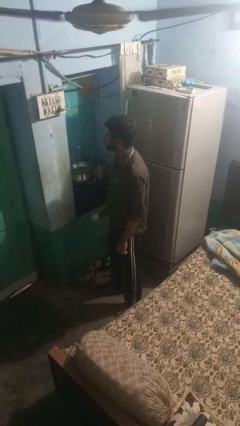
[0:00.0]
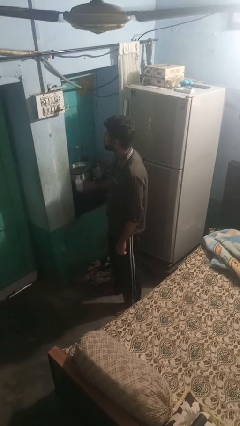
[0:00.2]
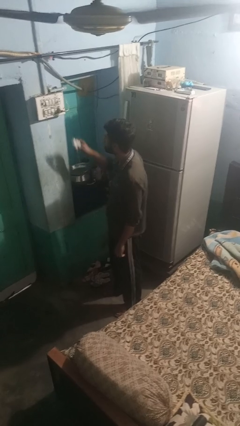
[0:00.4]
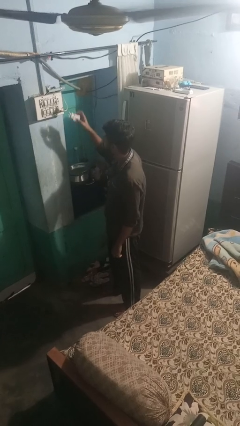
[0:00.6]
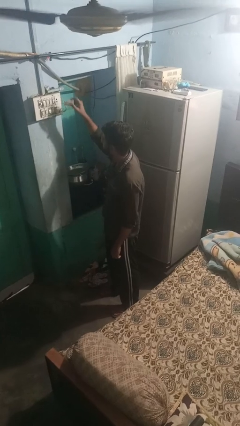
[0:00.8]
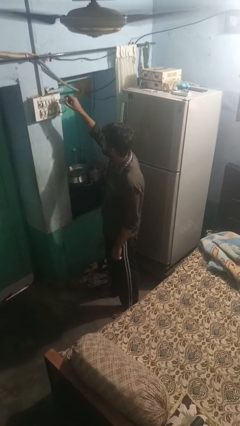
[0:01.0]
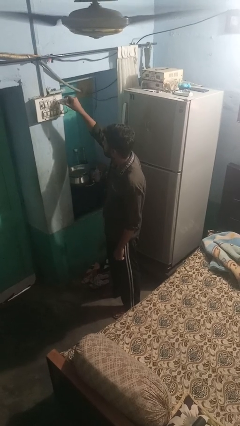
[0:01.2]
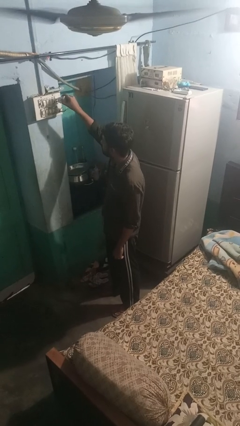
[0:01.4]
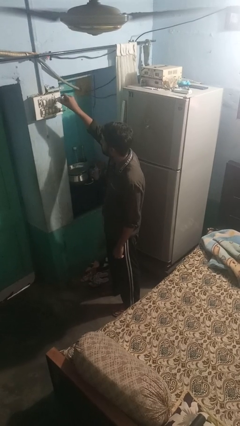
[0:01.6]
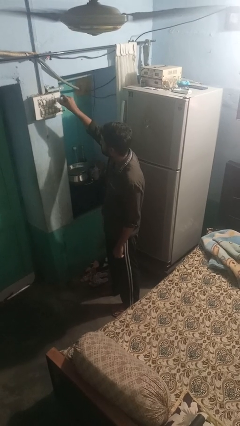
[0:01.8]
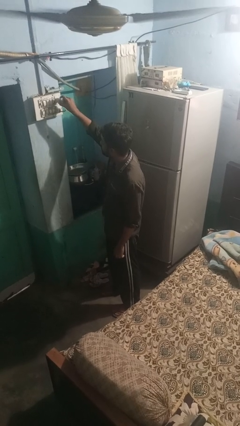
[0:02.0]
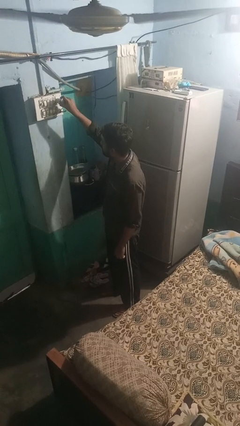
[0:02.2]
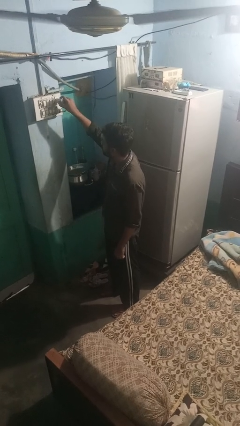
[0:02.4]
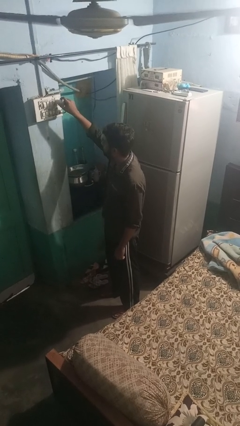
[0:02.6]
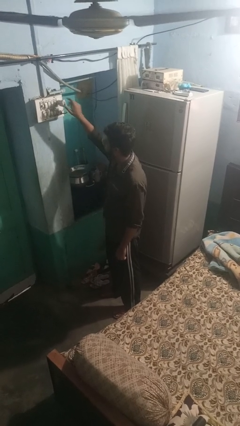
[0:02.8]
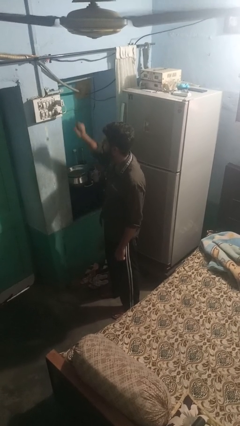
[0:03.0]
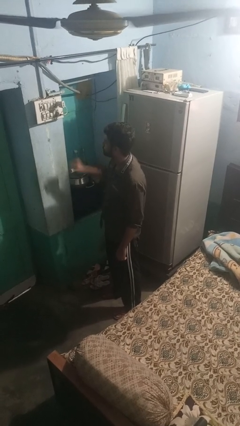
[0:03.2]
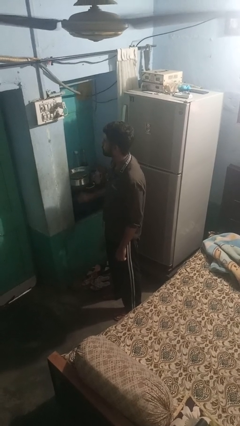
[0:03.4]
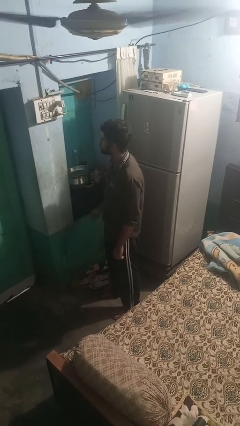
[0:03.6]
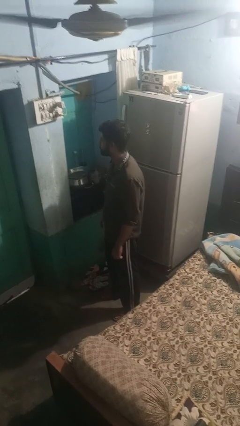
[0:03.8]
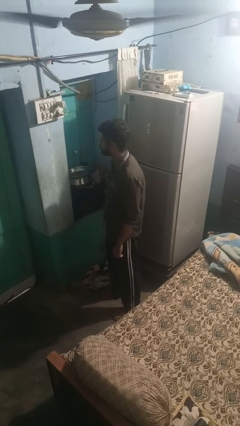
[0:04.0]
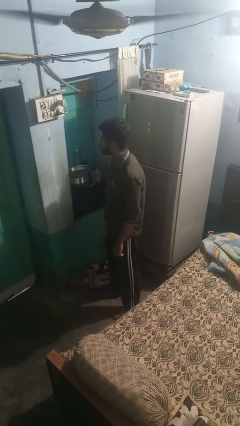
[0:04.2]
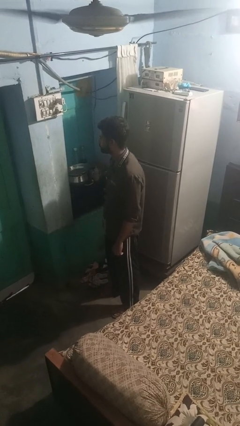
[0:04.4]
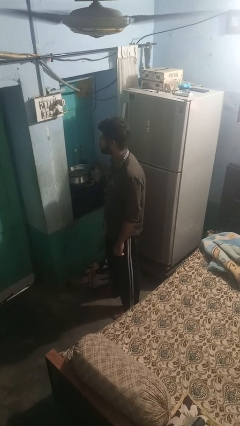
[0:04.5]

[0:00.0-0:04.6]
person plugs into electrical socket

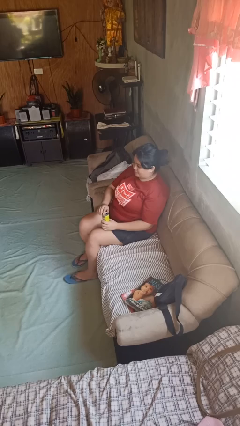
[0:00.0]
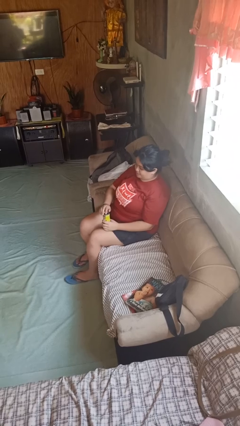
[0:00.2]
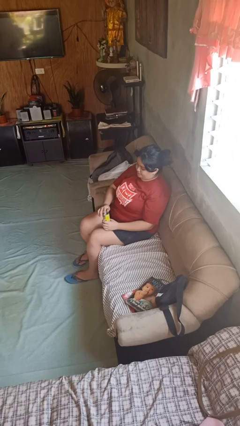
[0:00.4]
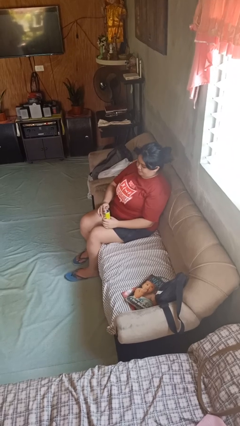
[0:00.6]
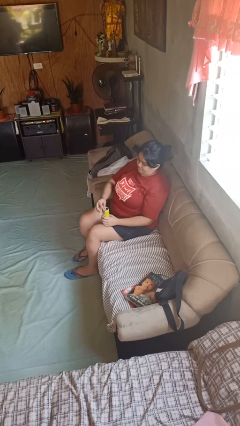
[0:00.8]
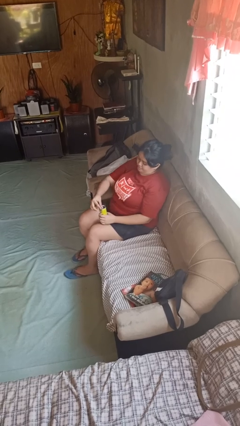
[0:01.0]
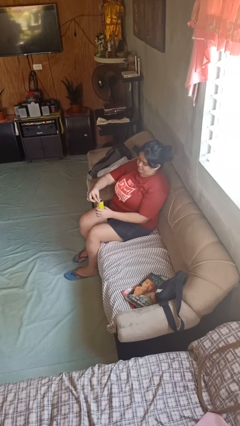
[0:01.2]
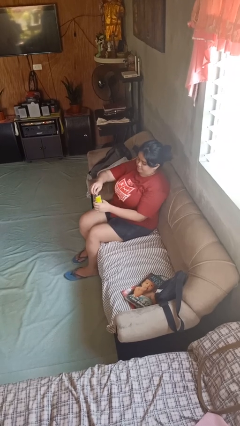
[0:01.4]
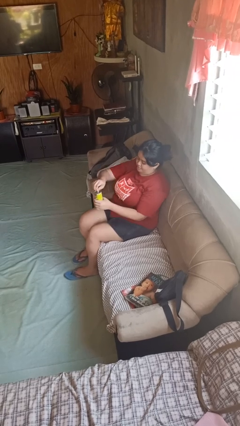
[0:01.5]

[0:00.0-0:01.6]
person opens beverage can

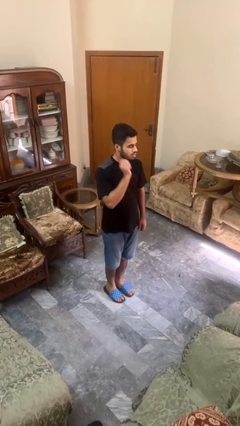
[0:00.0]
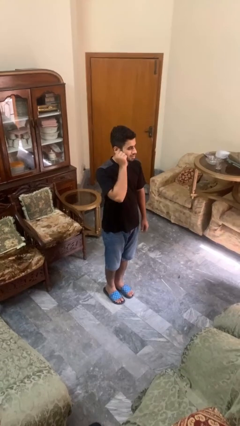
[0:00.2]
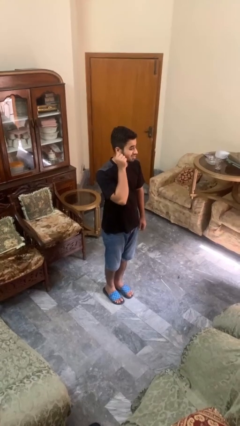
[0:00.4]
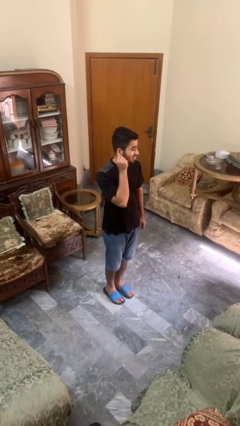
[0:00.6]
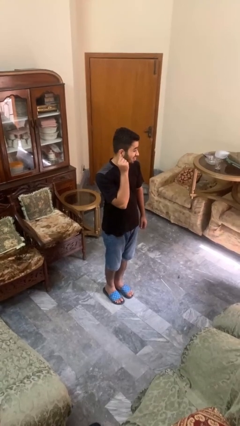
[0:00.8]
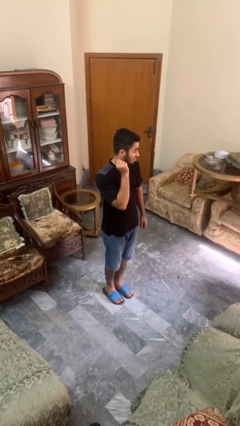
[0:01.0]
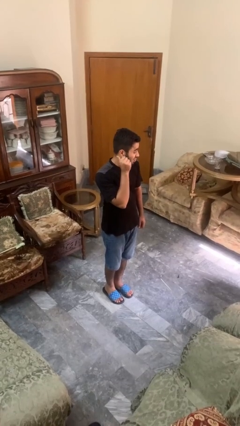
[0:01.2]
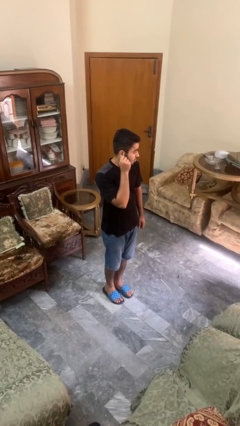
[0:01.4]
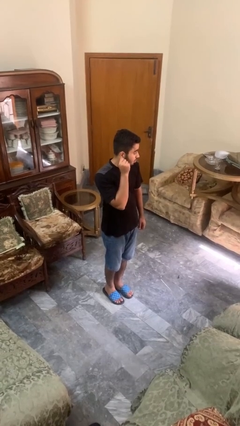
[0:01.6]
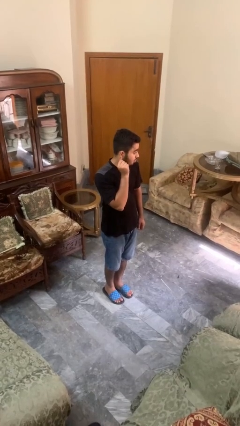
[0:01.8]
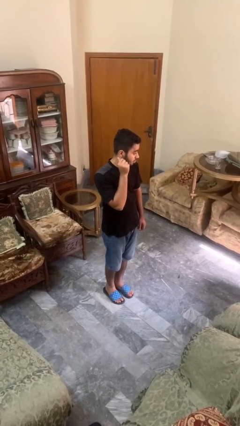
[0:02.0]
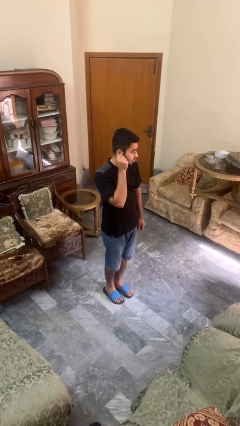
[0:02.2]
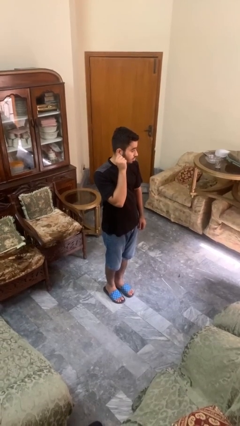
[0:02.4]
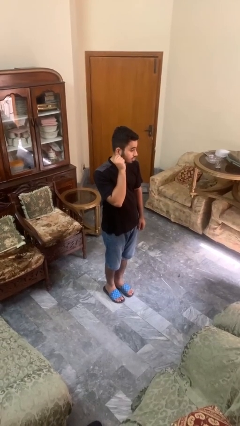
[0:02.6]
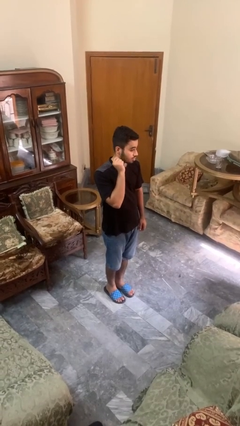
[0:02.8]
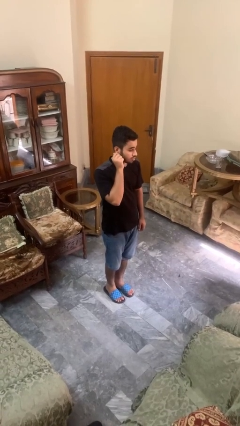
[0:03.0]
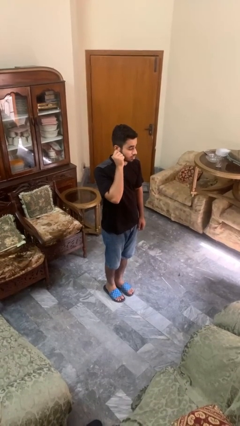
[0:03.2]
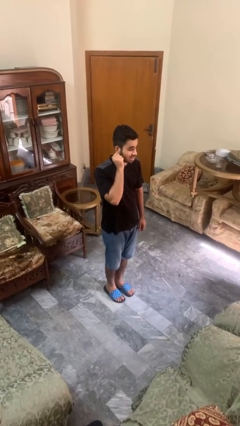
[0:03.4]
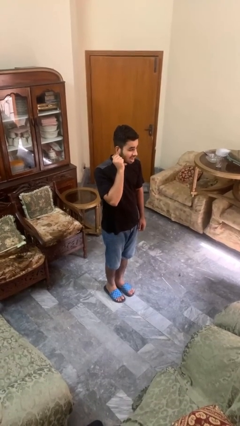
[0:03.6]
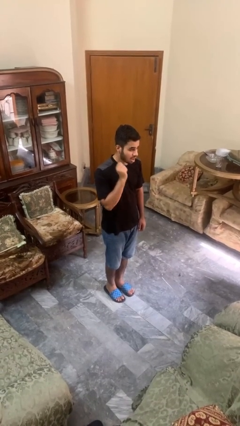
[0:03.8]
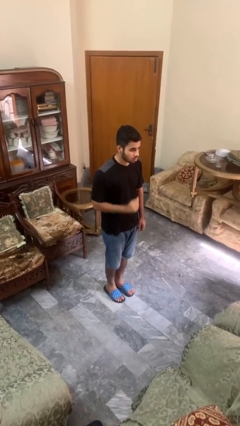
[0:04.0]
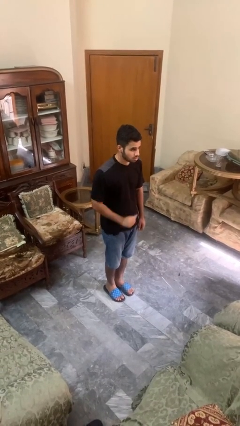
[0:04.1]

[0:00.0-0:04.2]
person touches earlobe

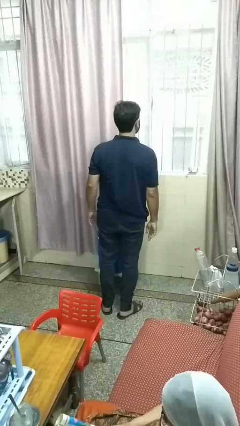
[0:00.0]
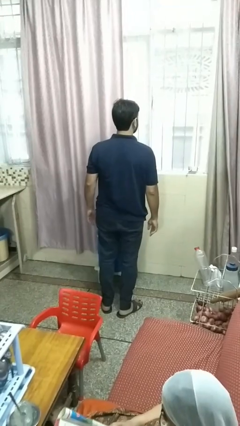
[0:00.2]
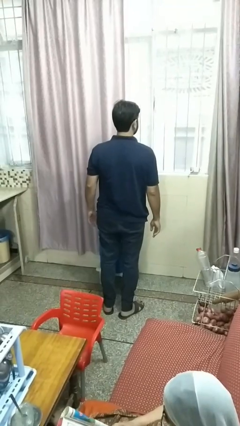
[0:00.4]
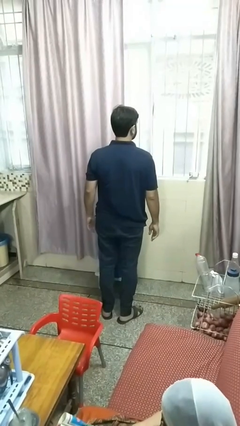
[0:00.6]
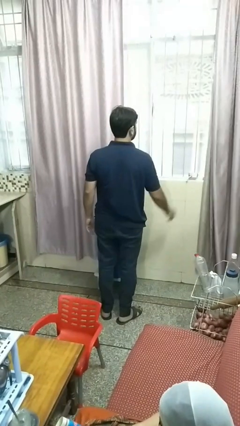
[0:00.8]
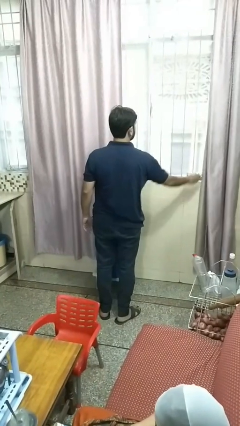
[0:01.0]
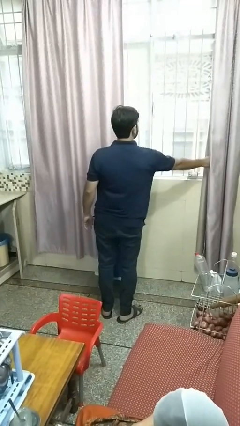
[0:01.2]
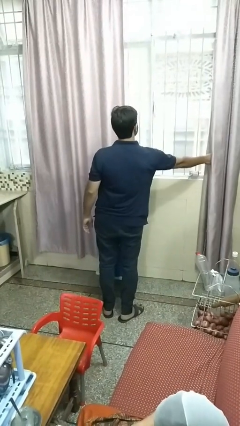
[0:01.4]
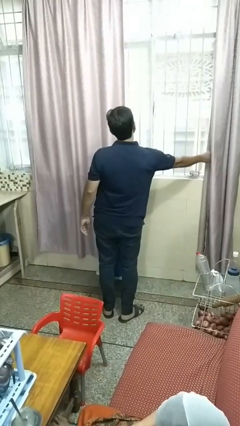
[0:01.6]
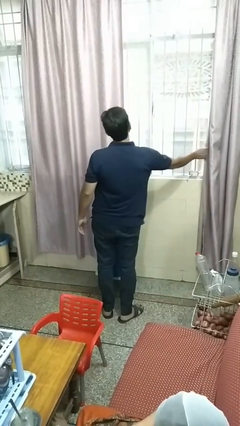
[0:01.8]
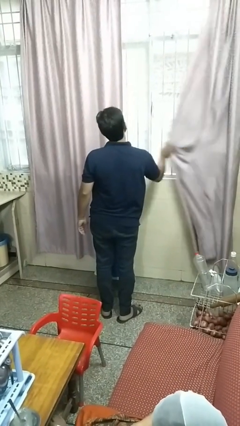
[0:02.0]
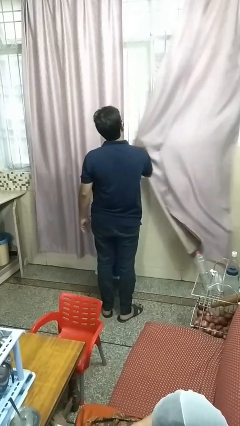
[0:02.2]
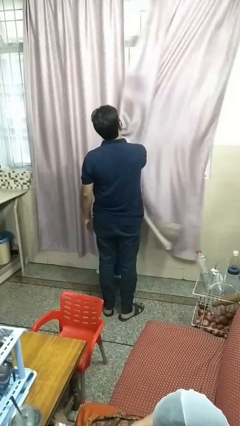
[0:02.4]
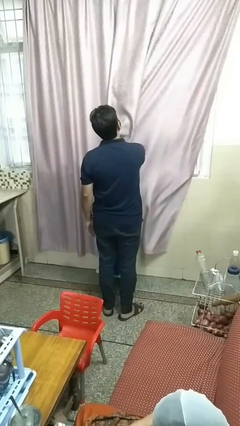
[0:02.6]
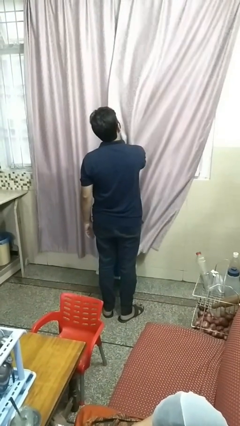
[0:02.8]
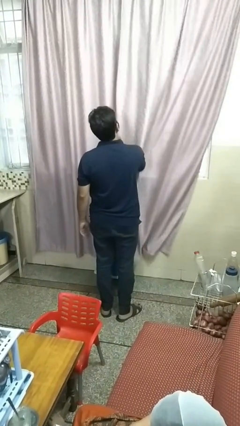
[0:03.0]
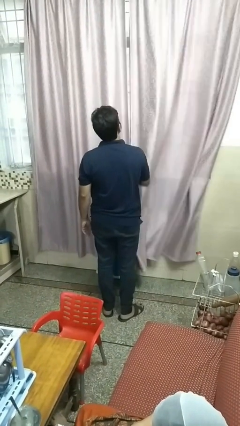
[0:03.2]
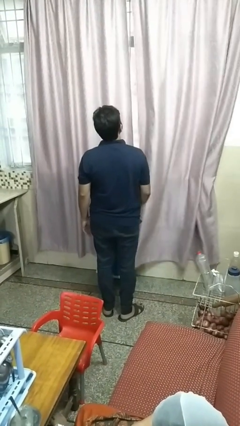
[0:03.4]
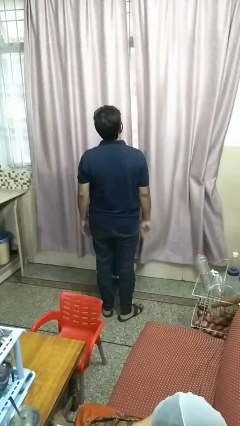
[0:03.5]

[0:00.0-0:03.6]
person closes curtains

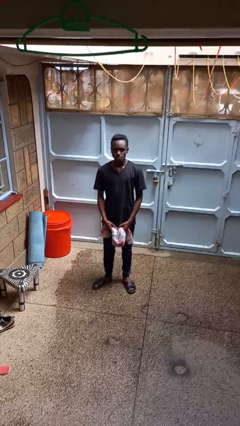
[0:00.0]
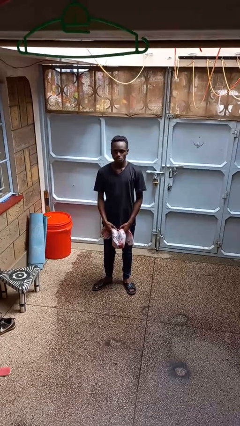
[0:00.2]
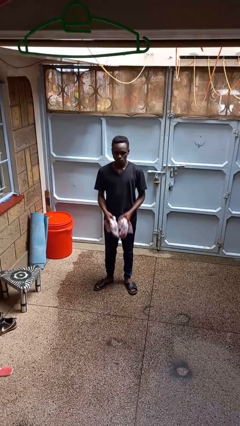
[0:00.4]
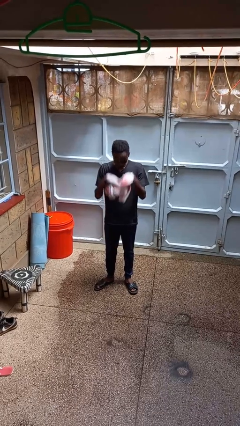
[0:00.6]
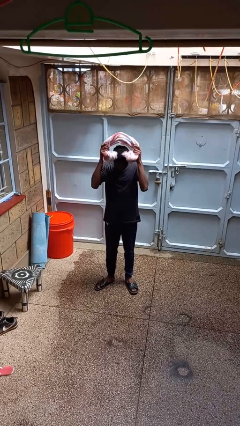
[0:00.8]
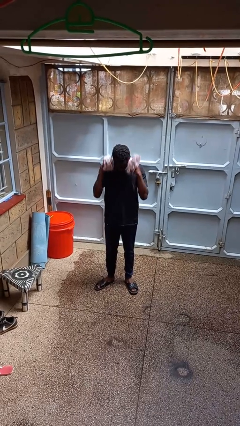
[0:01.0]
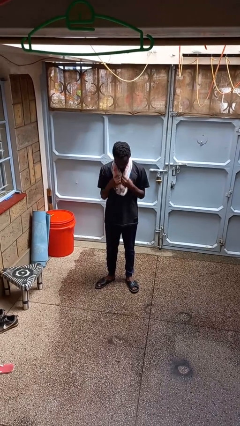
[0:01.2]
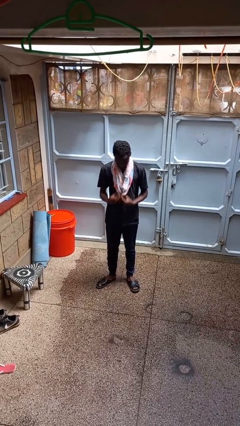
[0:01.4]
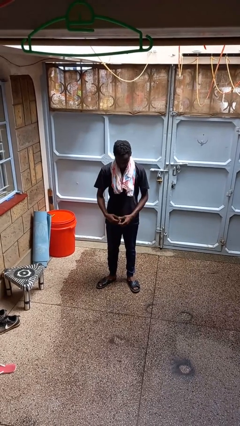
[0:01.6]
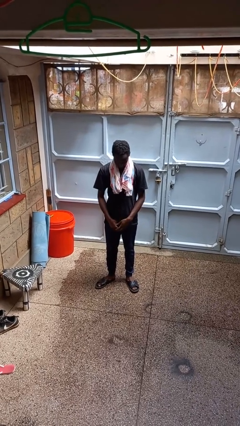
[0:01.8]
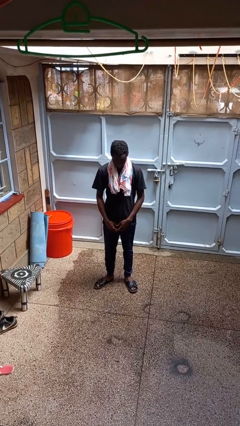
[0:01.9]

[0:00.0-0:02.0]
person puts on scarf

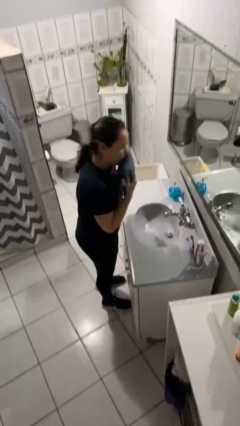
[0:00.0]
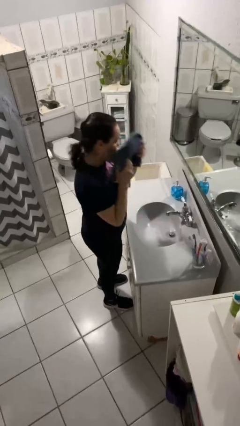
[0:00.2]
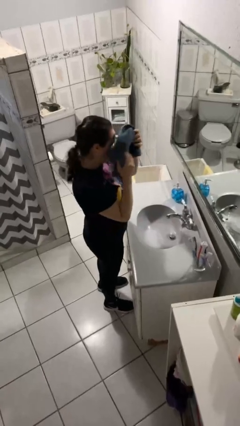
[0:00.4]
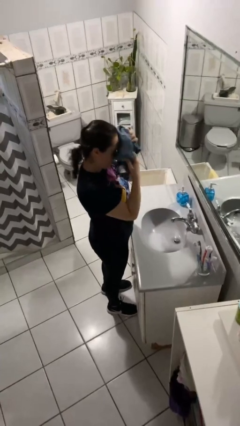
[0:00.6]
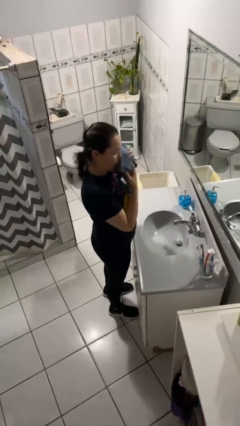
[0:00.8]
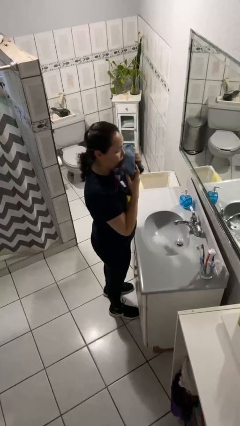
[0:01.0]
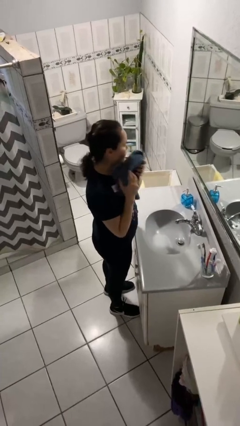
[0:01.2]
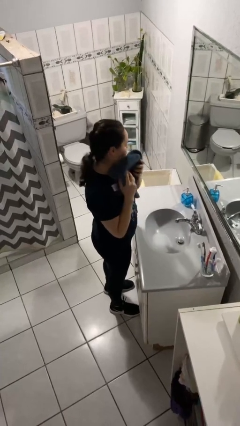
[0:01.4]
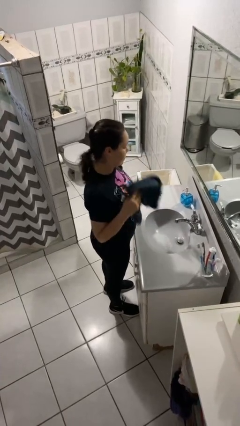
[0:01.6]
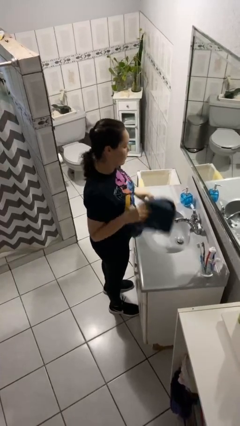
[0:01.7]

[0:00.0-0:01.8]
person dries face with towel
